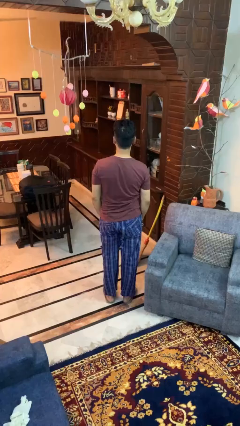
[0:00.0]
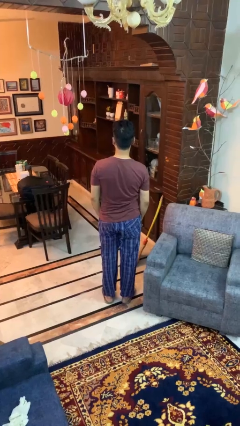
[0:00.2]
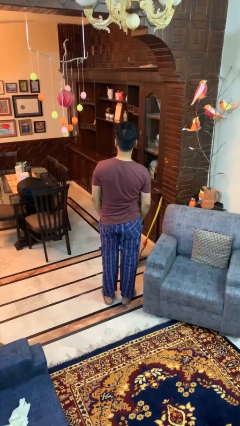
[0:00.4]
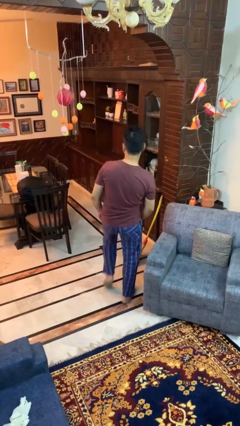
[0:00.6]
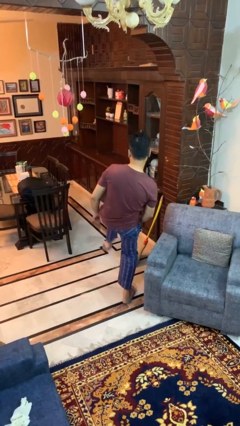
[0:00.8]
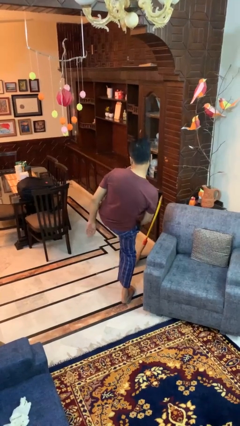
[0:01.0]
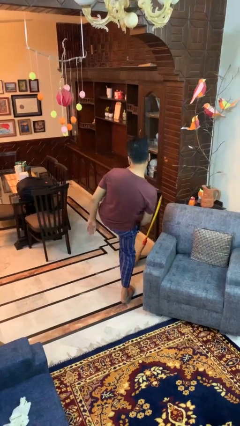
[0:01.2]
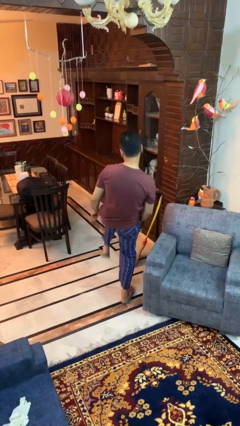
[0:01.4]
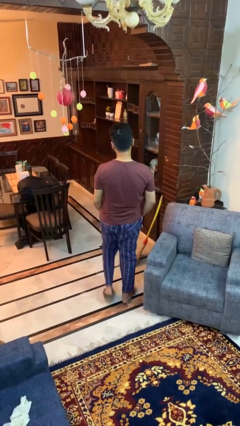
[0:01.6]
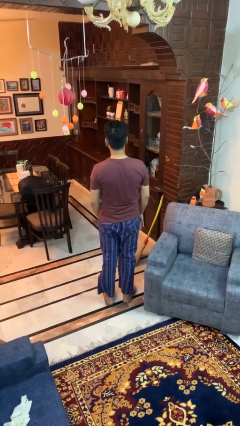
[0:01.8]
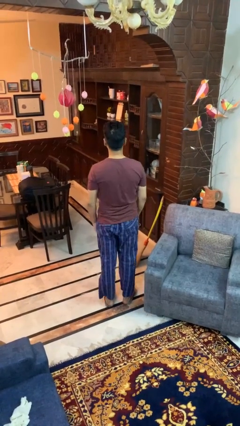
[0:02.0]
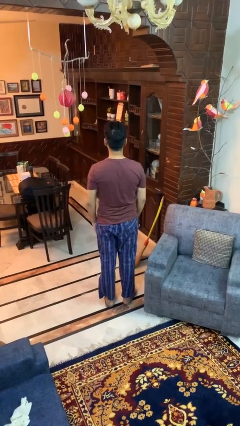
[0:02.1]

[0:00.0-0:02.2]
person karate kicks

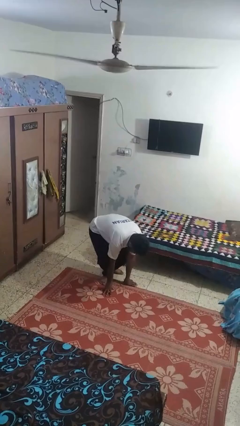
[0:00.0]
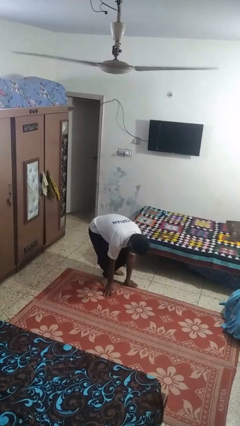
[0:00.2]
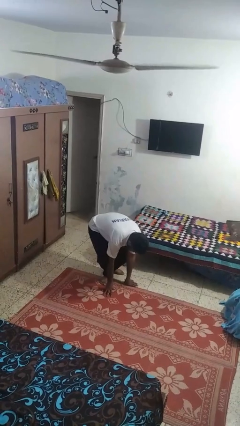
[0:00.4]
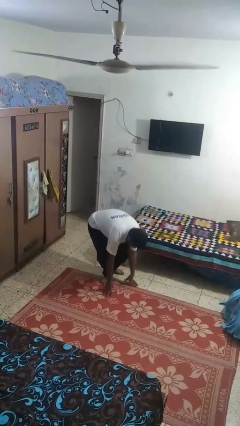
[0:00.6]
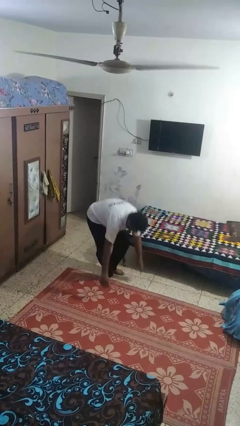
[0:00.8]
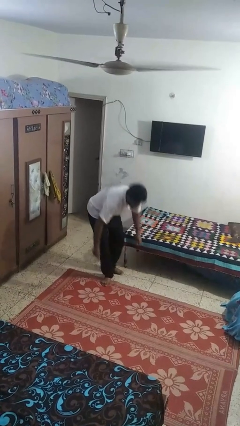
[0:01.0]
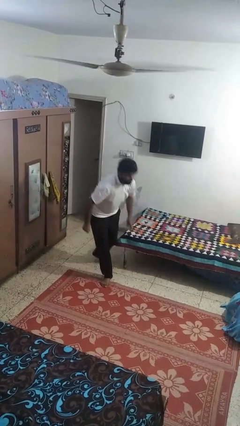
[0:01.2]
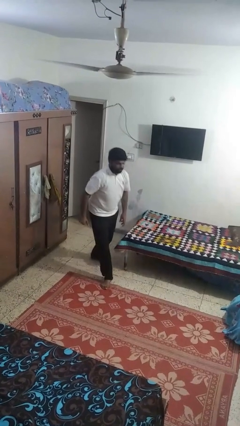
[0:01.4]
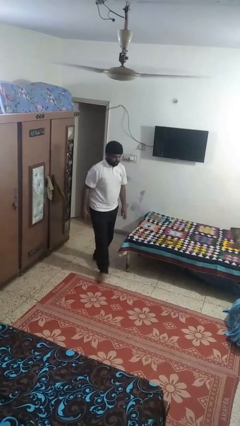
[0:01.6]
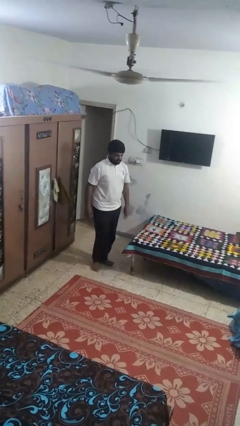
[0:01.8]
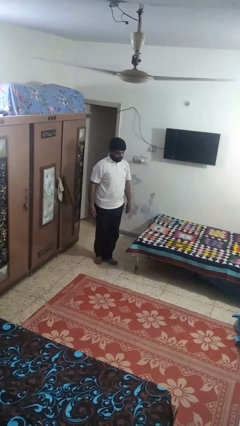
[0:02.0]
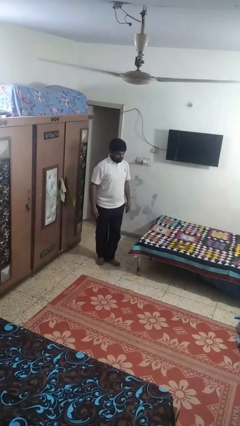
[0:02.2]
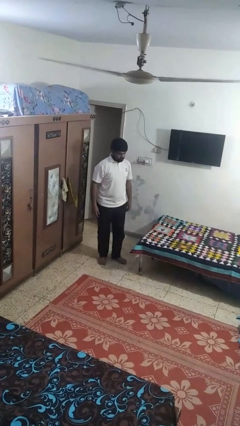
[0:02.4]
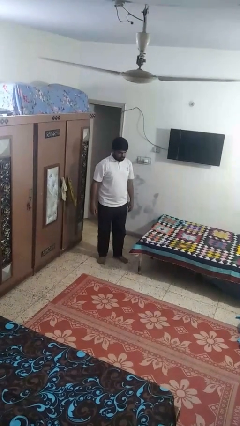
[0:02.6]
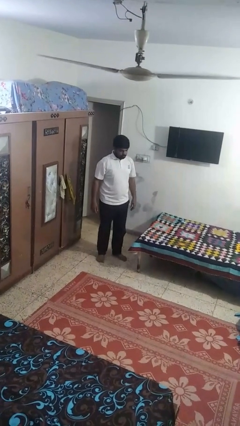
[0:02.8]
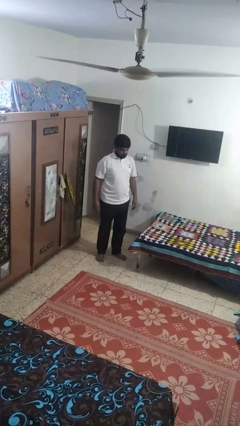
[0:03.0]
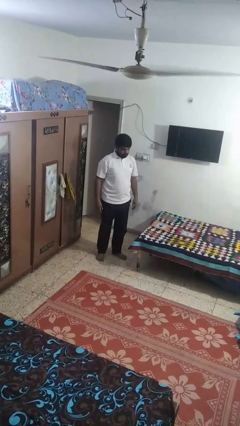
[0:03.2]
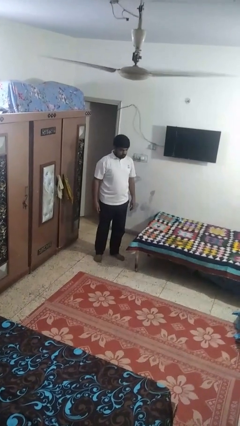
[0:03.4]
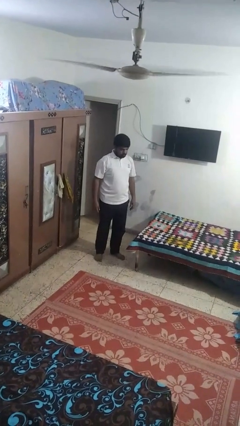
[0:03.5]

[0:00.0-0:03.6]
person stands up from floor

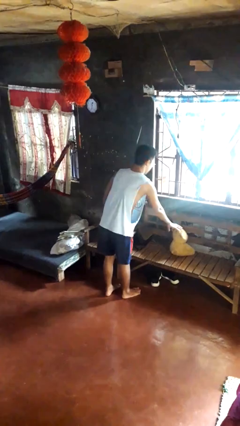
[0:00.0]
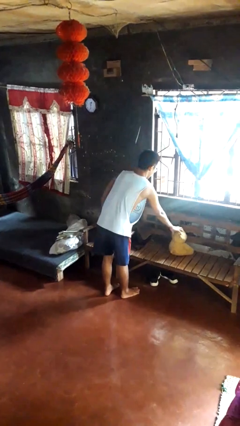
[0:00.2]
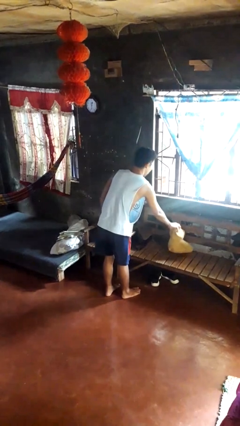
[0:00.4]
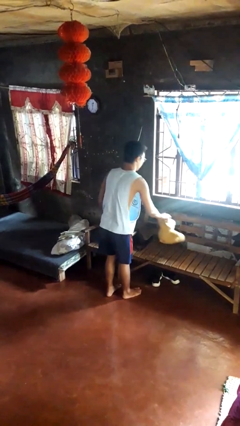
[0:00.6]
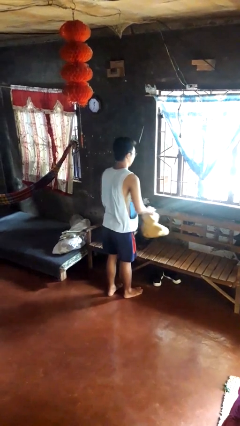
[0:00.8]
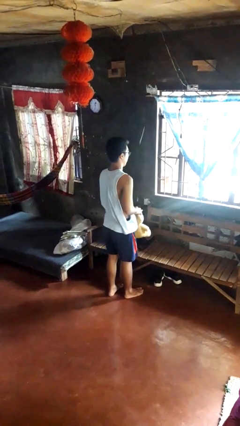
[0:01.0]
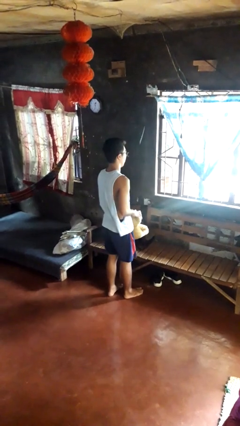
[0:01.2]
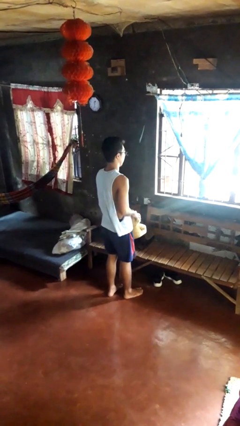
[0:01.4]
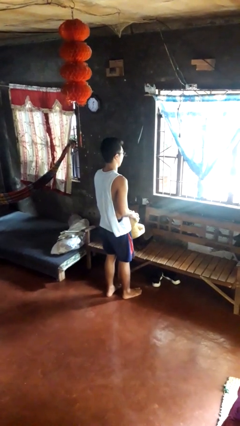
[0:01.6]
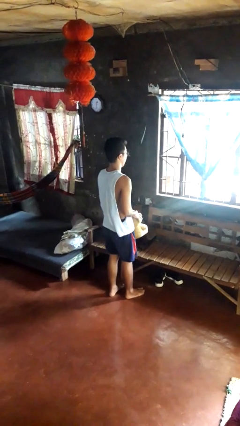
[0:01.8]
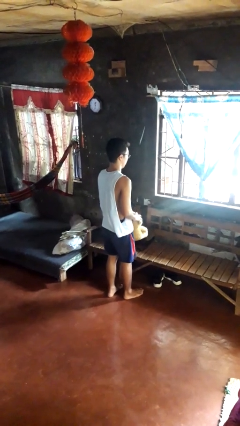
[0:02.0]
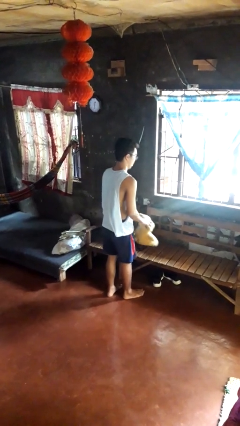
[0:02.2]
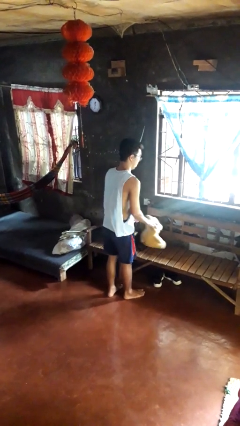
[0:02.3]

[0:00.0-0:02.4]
person picks up object from couch

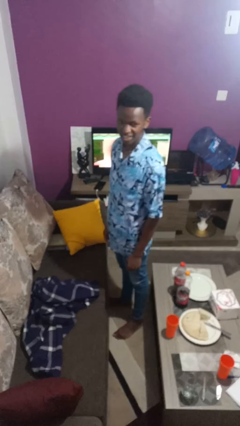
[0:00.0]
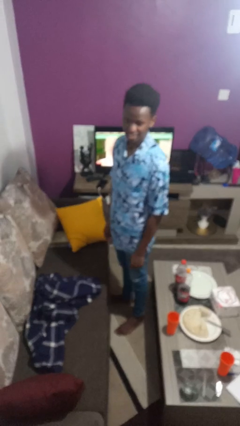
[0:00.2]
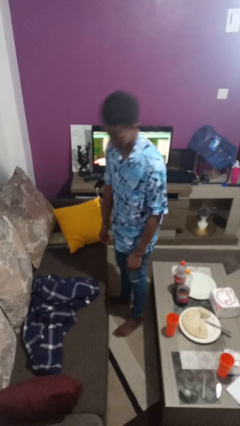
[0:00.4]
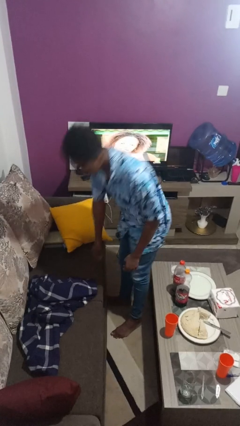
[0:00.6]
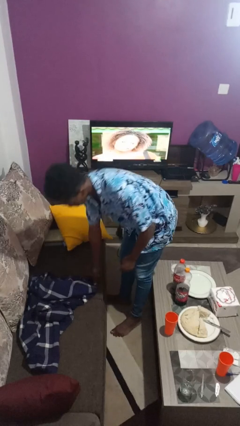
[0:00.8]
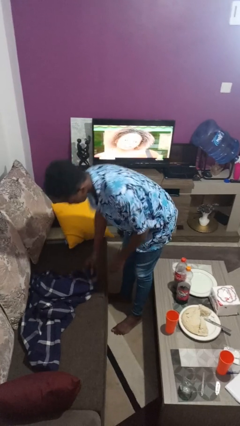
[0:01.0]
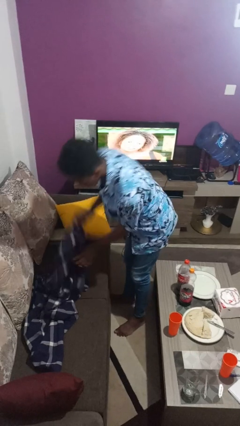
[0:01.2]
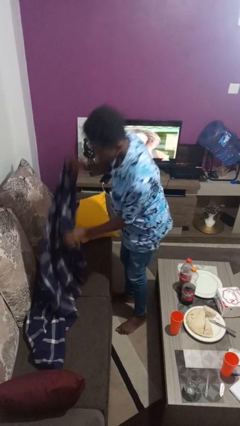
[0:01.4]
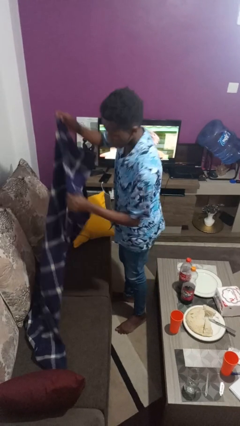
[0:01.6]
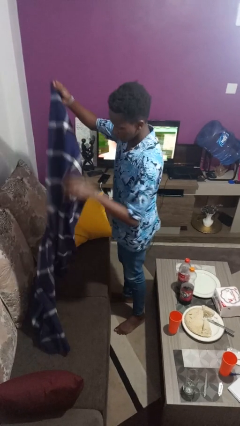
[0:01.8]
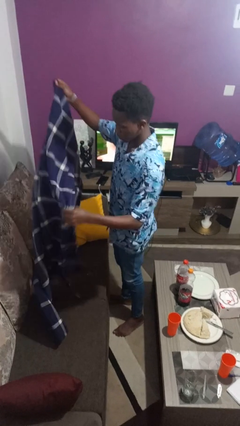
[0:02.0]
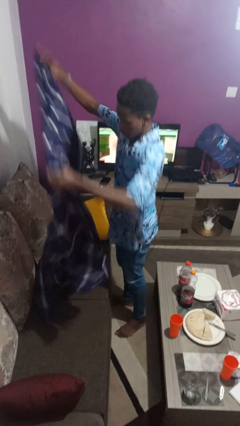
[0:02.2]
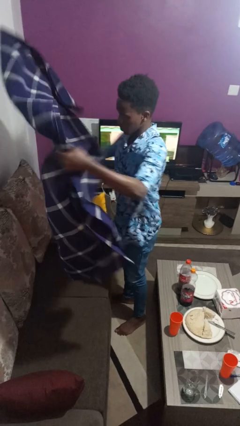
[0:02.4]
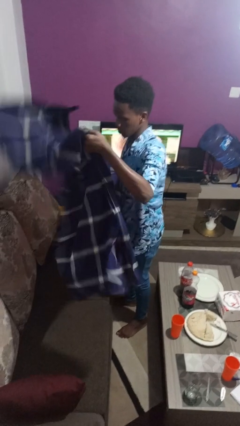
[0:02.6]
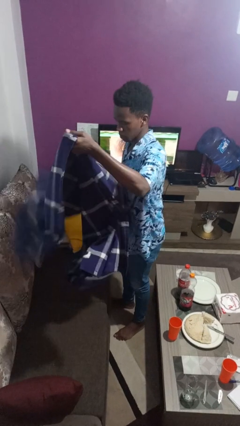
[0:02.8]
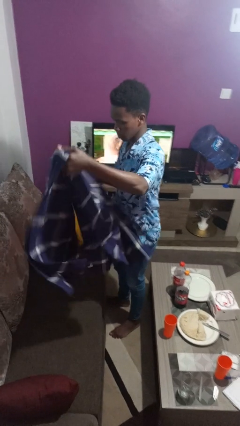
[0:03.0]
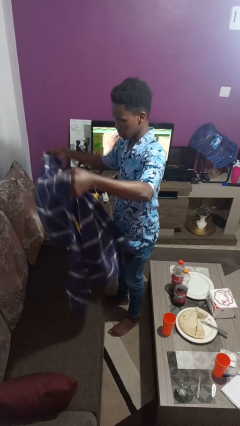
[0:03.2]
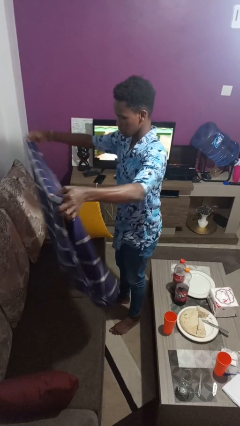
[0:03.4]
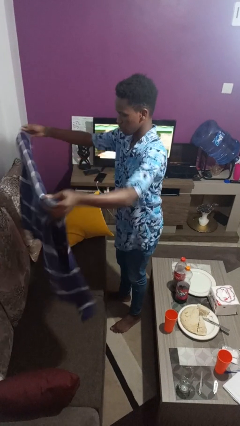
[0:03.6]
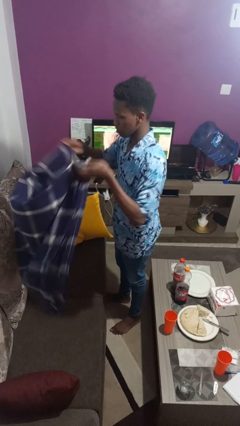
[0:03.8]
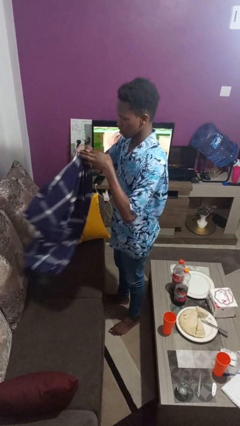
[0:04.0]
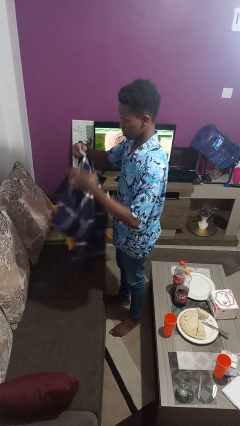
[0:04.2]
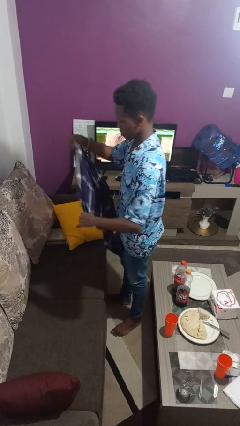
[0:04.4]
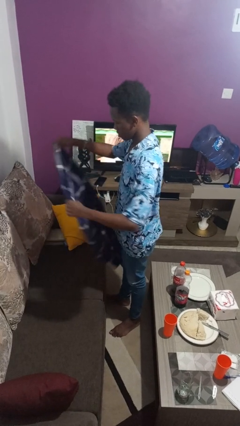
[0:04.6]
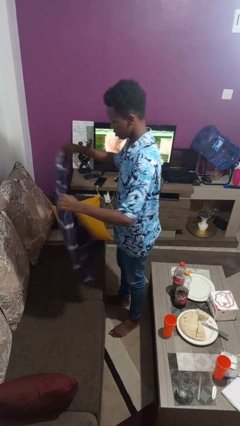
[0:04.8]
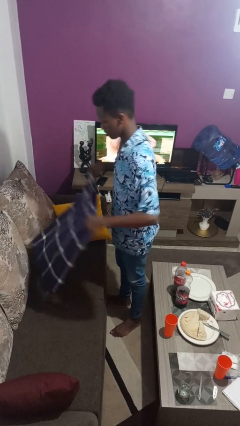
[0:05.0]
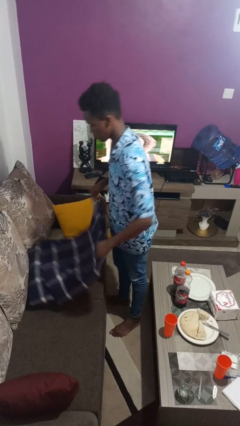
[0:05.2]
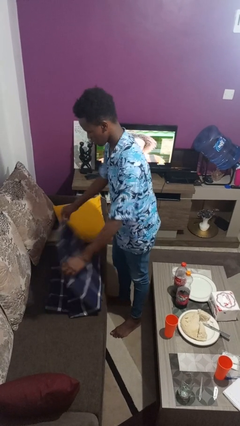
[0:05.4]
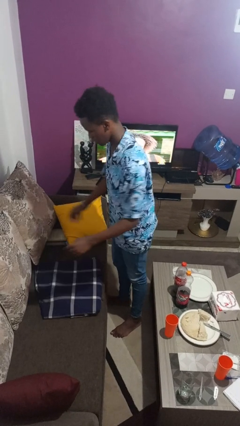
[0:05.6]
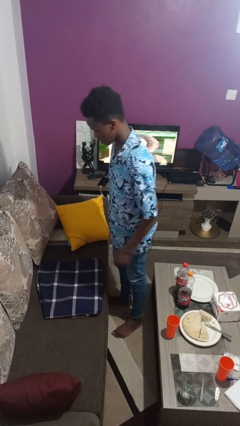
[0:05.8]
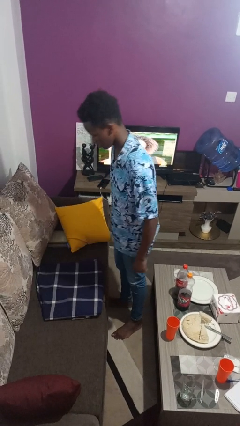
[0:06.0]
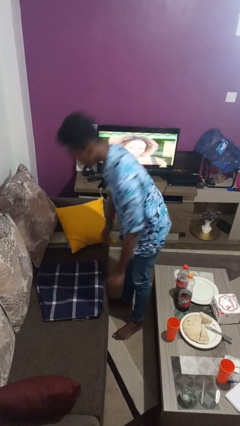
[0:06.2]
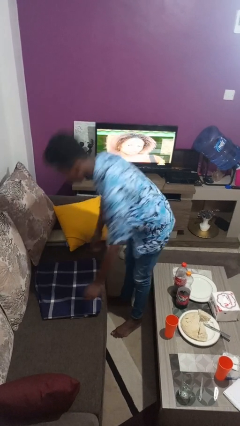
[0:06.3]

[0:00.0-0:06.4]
person folds blanket

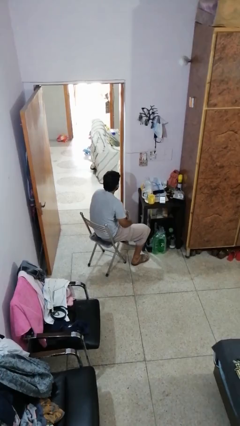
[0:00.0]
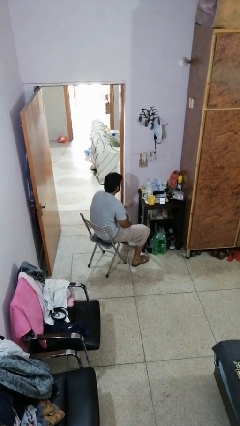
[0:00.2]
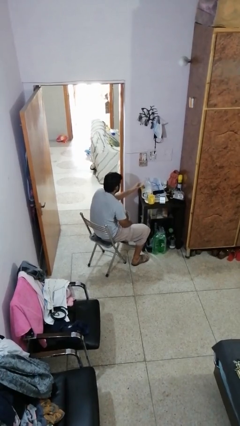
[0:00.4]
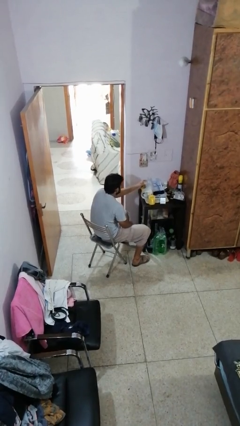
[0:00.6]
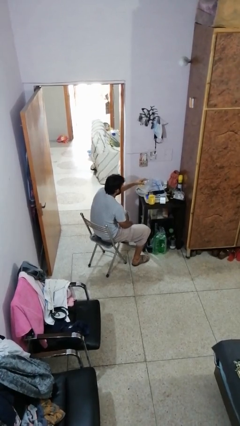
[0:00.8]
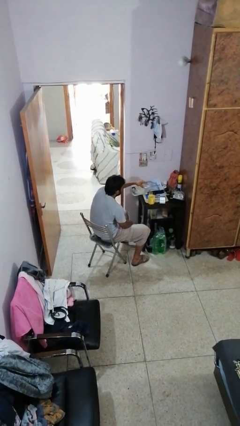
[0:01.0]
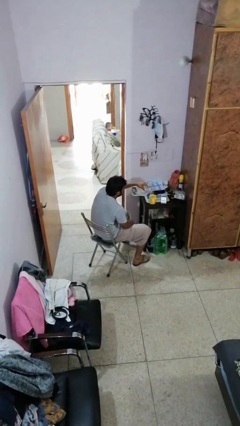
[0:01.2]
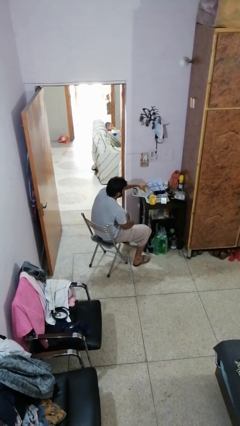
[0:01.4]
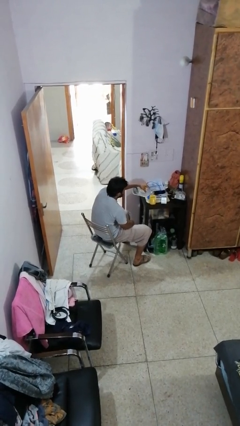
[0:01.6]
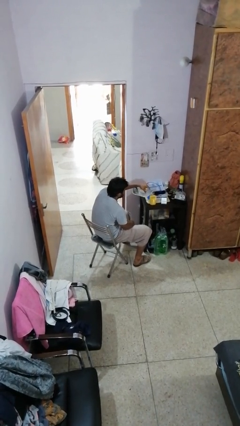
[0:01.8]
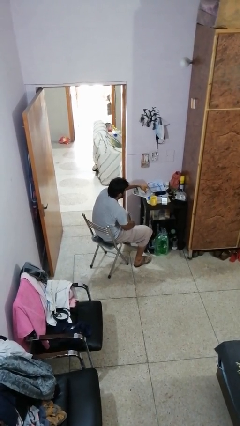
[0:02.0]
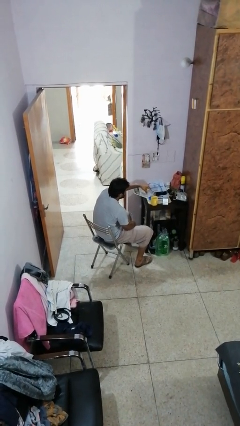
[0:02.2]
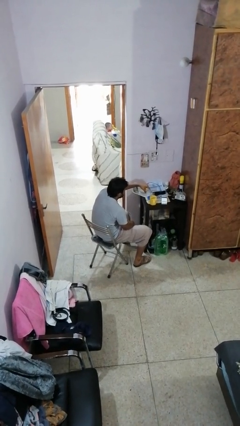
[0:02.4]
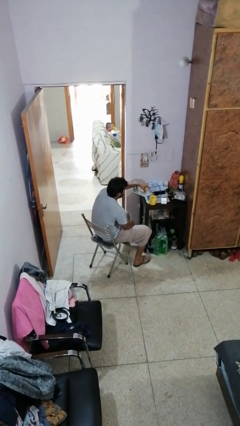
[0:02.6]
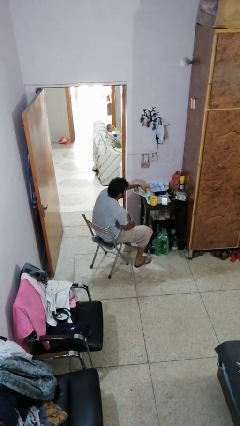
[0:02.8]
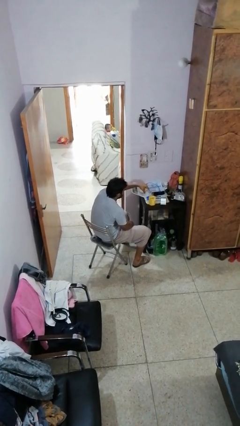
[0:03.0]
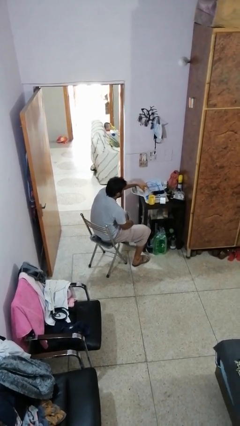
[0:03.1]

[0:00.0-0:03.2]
person pours liquid into cup
